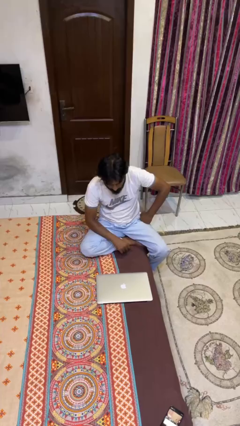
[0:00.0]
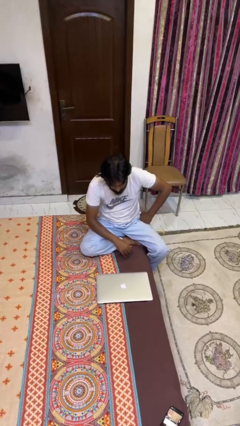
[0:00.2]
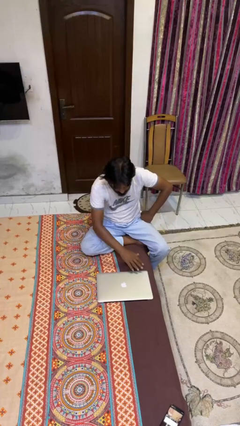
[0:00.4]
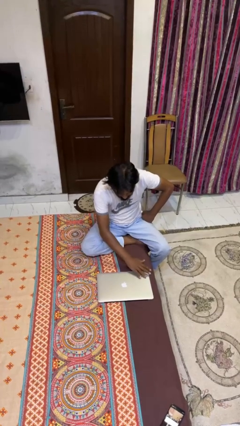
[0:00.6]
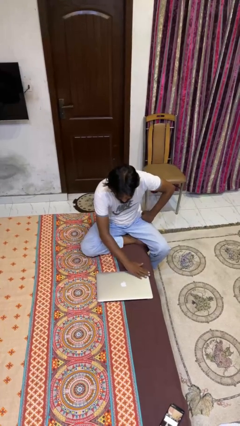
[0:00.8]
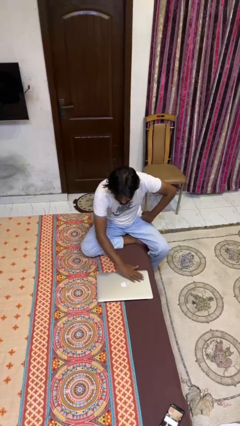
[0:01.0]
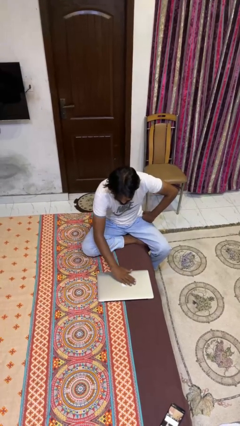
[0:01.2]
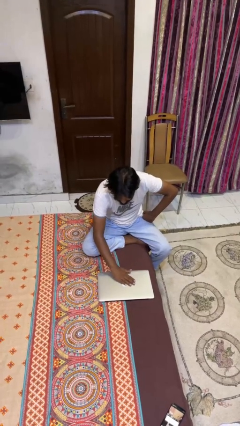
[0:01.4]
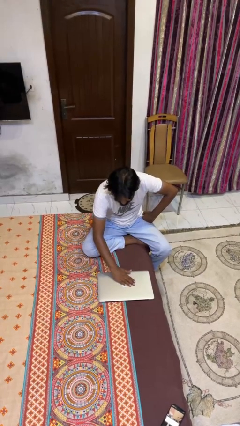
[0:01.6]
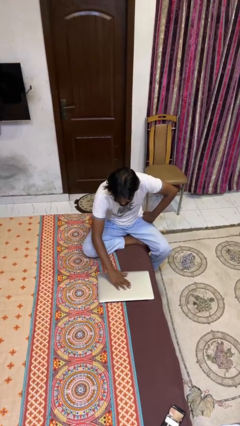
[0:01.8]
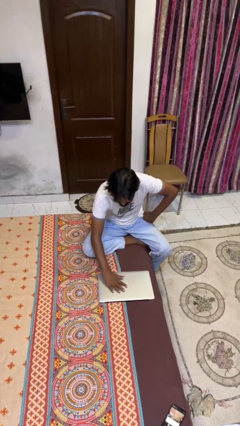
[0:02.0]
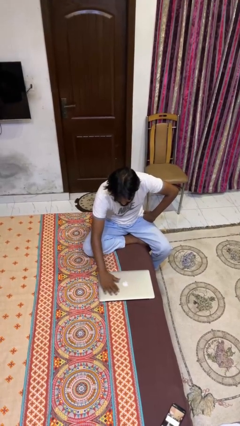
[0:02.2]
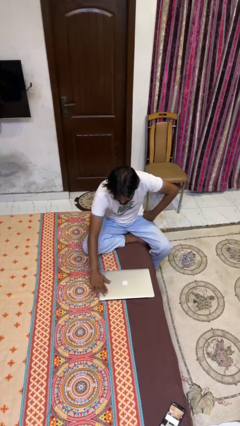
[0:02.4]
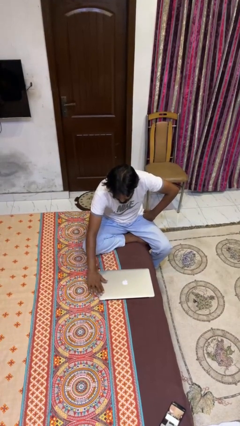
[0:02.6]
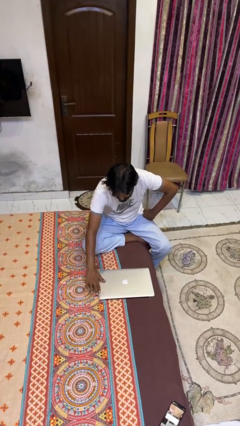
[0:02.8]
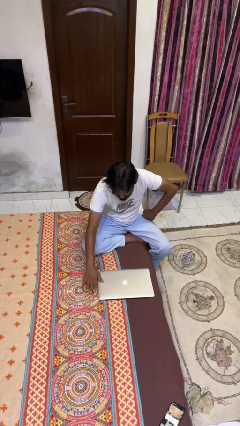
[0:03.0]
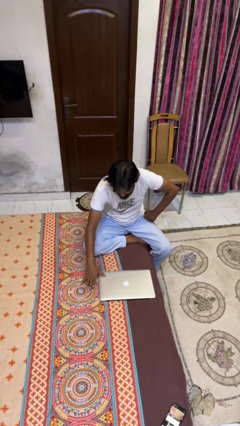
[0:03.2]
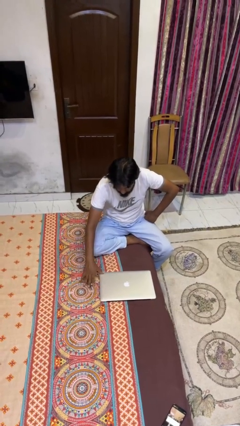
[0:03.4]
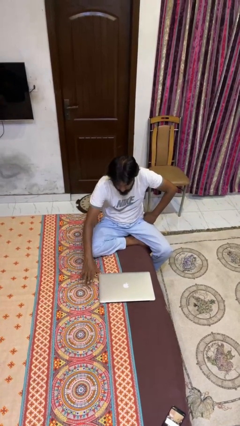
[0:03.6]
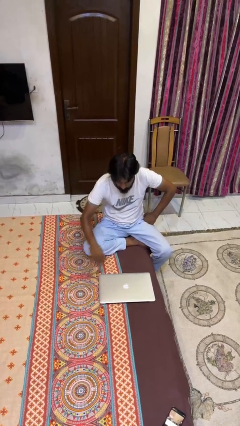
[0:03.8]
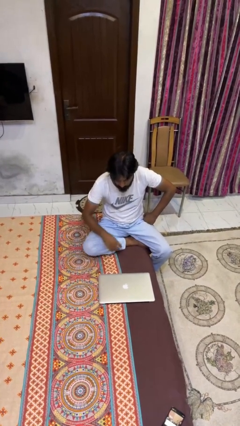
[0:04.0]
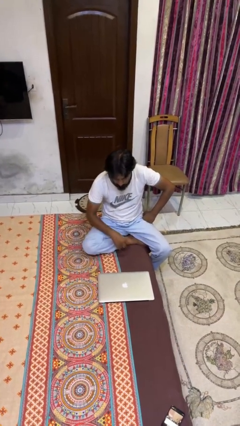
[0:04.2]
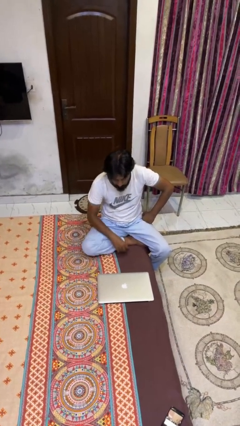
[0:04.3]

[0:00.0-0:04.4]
person waves hand over object

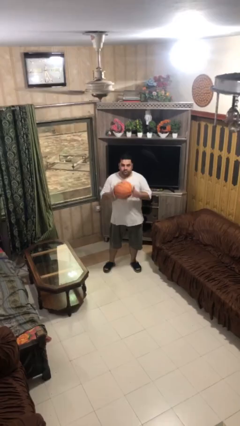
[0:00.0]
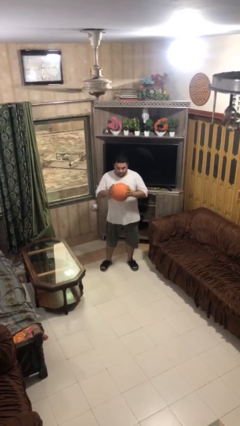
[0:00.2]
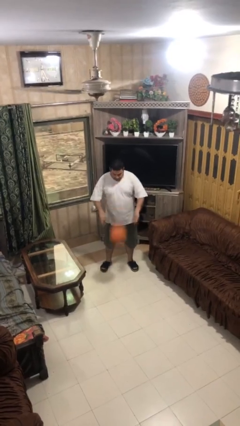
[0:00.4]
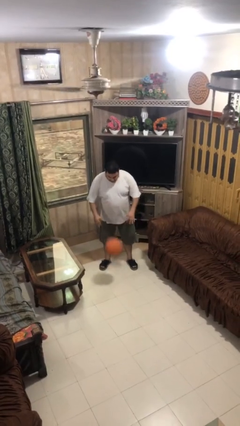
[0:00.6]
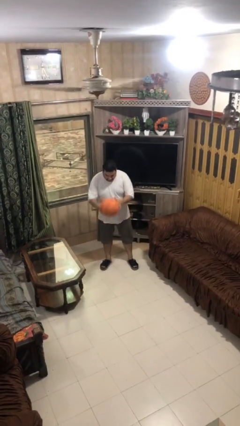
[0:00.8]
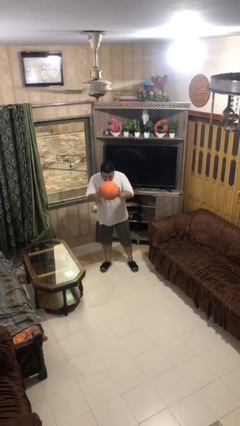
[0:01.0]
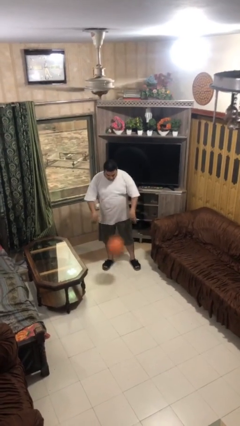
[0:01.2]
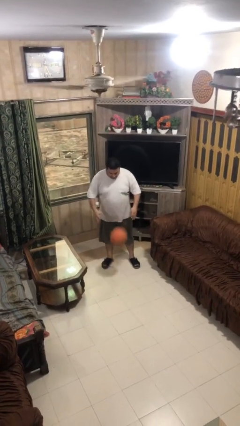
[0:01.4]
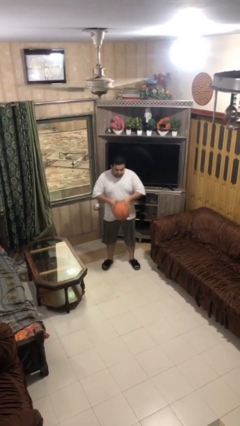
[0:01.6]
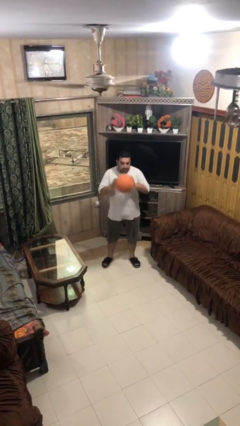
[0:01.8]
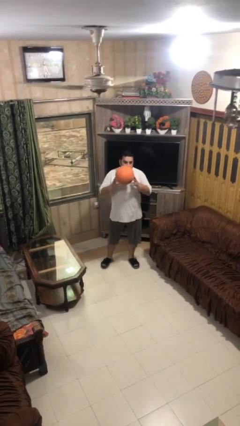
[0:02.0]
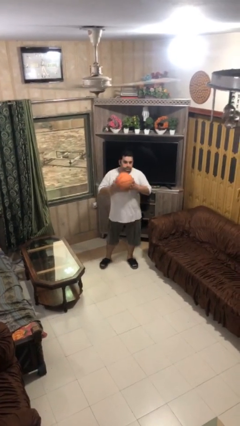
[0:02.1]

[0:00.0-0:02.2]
person bounces ball on floor

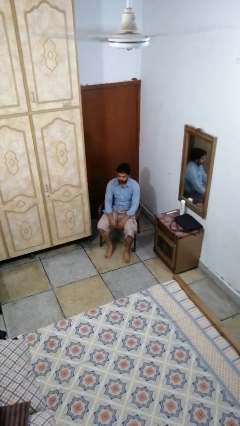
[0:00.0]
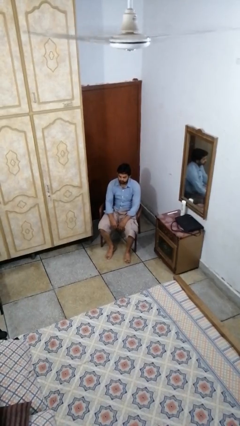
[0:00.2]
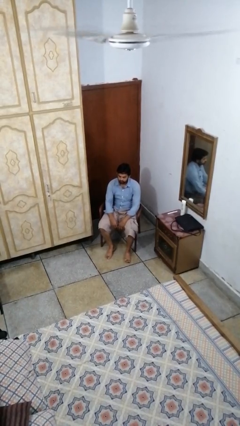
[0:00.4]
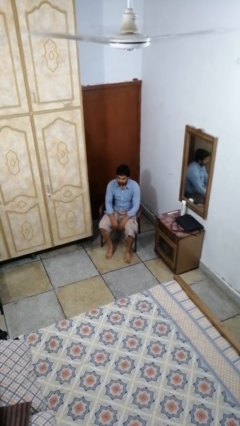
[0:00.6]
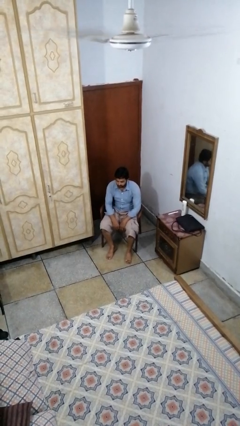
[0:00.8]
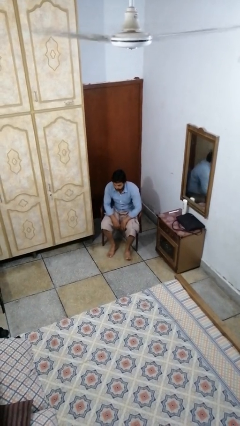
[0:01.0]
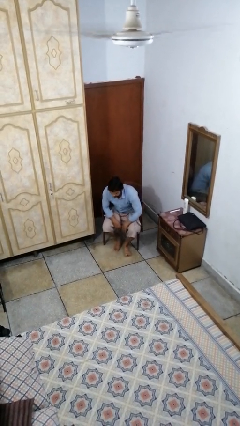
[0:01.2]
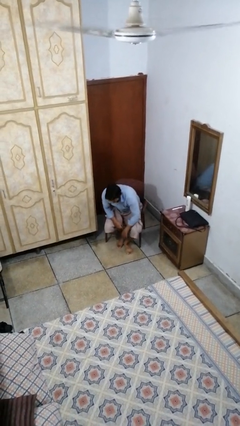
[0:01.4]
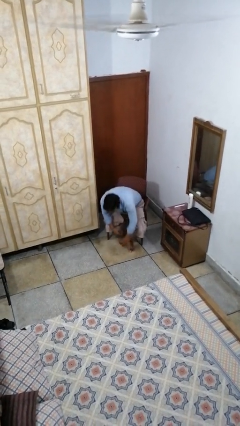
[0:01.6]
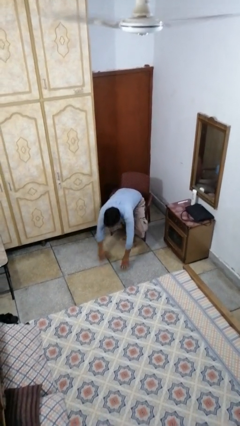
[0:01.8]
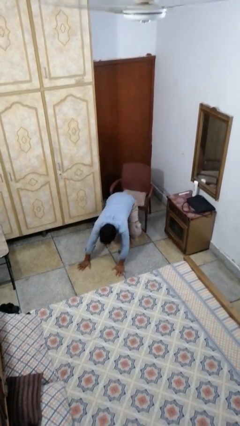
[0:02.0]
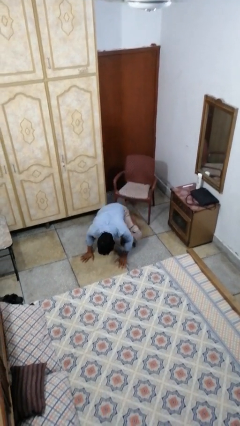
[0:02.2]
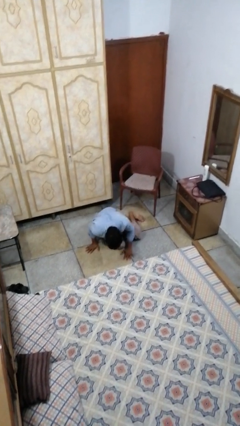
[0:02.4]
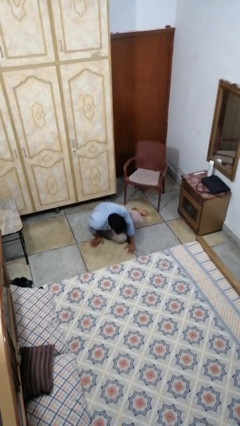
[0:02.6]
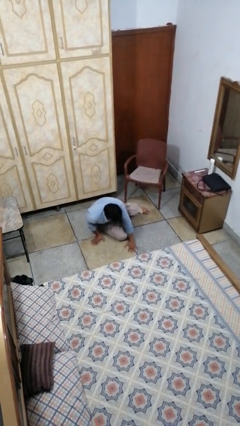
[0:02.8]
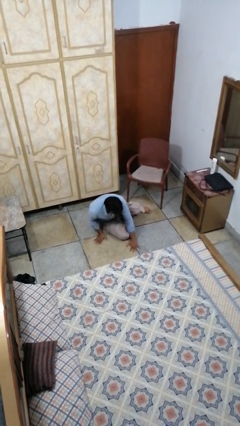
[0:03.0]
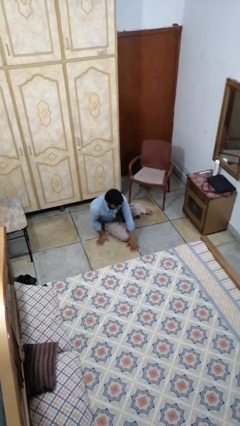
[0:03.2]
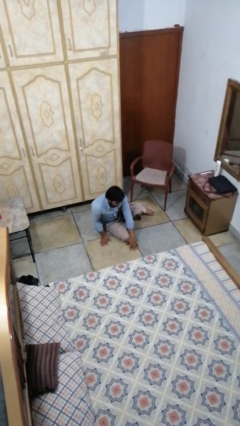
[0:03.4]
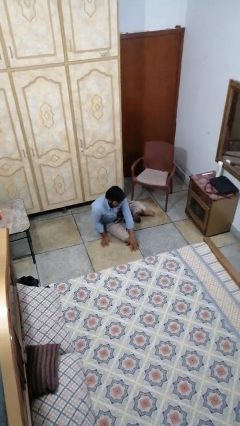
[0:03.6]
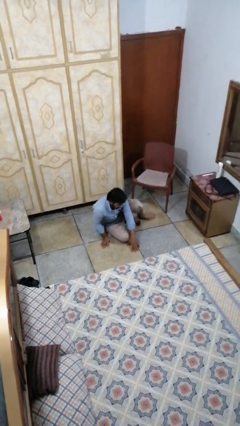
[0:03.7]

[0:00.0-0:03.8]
person falls from chair

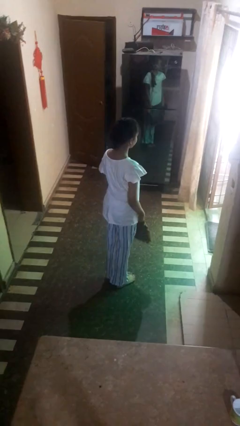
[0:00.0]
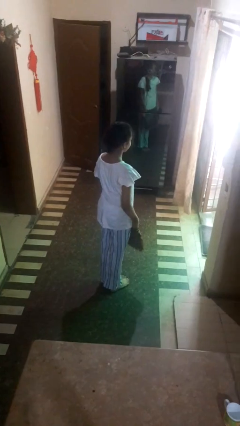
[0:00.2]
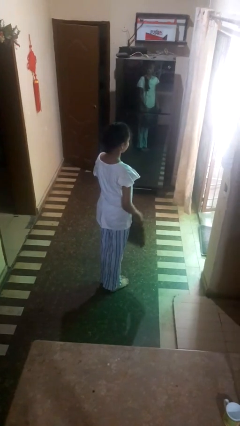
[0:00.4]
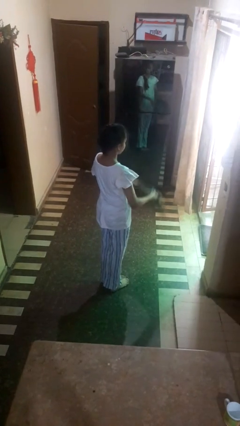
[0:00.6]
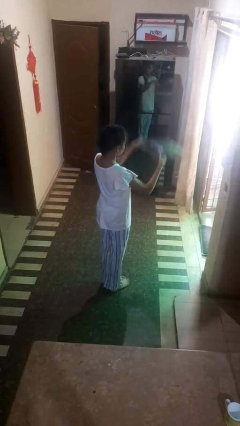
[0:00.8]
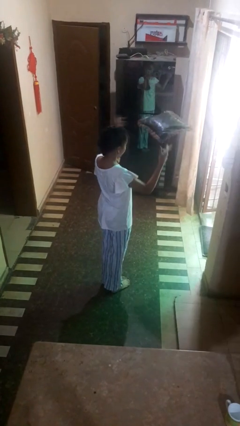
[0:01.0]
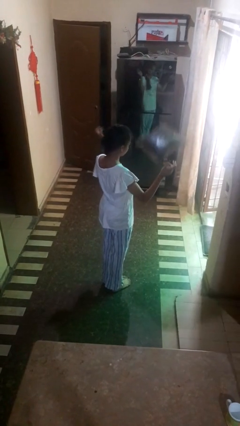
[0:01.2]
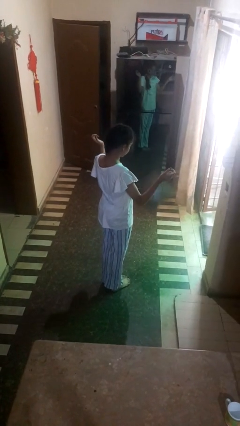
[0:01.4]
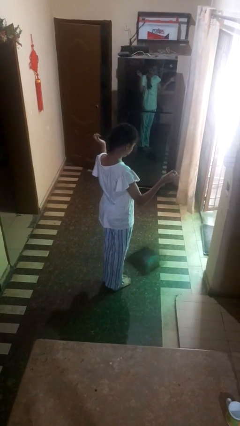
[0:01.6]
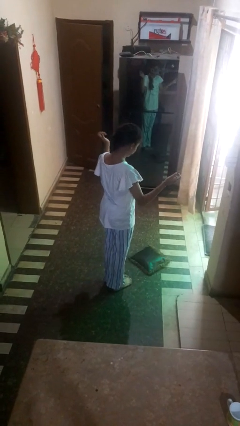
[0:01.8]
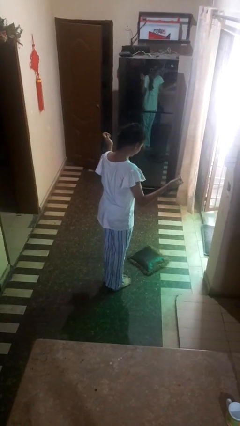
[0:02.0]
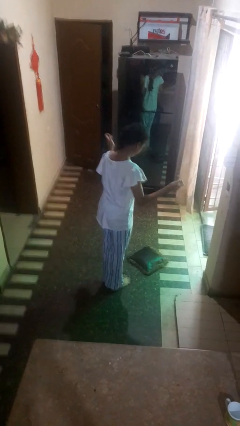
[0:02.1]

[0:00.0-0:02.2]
person throws object into air

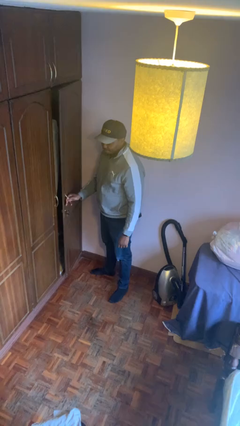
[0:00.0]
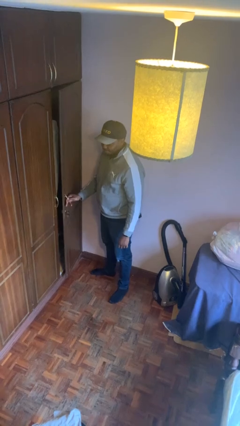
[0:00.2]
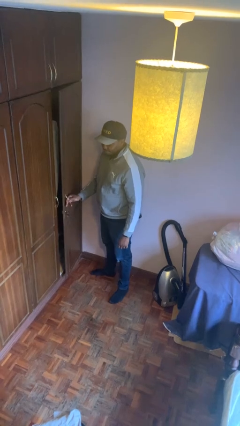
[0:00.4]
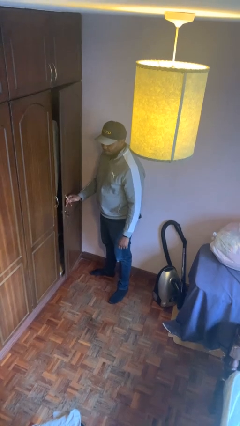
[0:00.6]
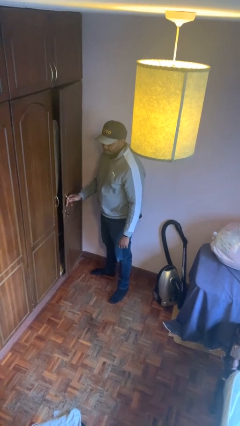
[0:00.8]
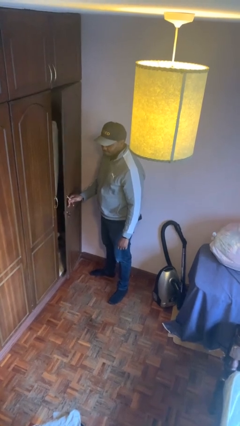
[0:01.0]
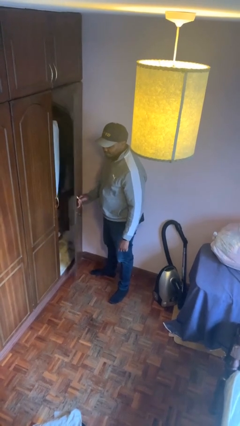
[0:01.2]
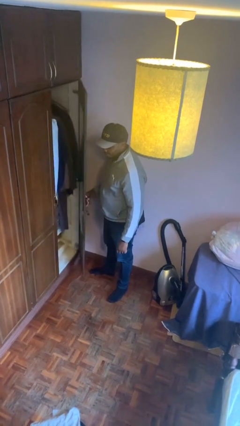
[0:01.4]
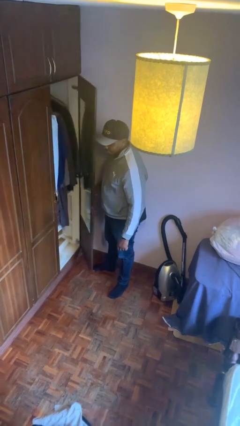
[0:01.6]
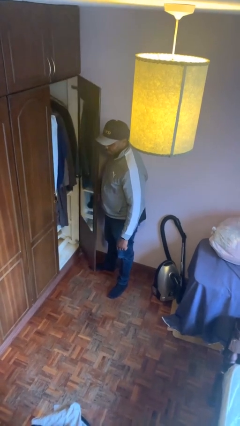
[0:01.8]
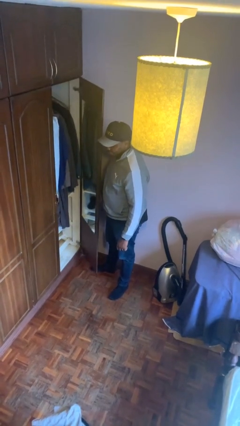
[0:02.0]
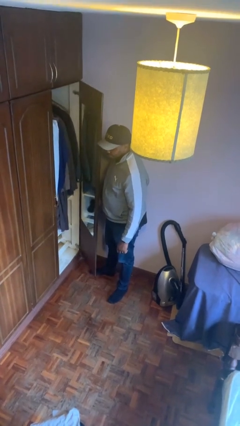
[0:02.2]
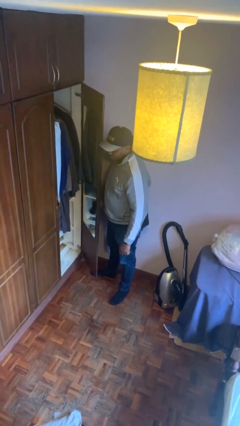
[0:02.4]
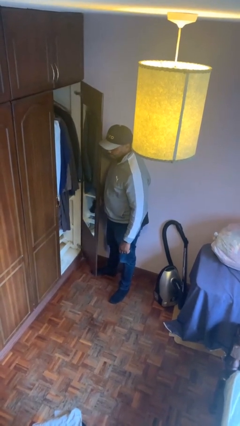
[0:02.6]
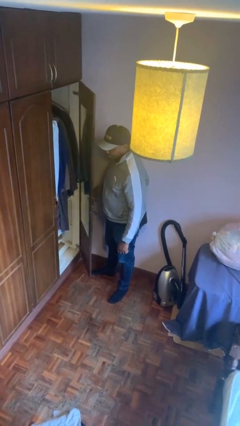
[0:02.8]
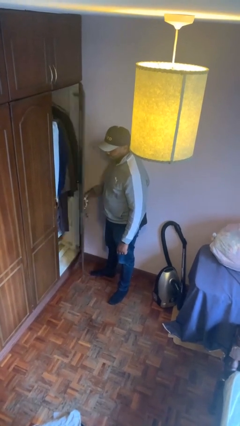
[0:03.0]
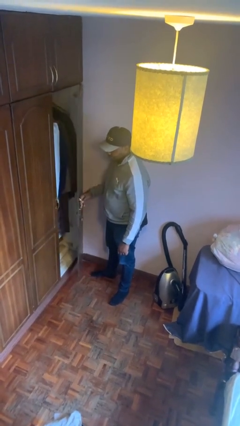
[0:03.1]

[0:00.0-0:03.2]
person opens closet door

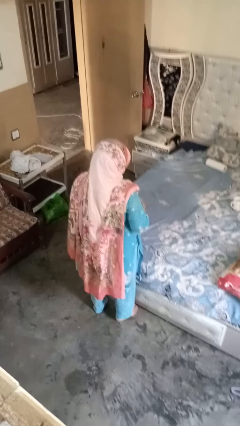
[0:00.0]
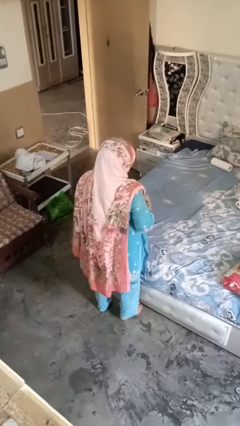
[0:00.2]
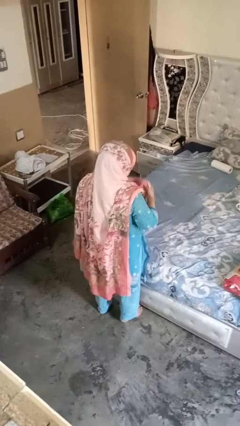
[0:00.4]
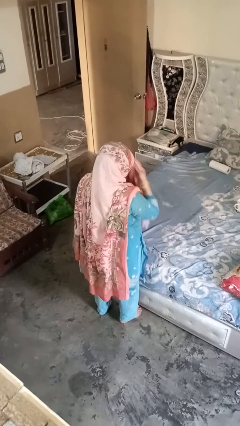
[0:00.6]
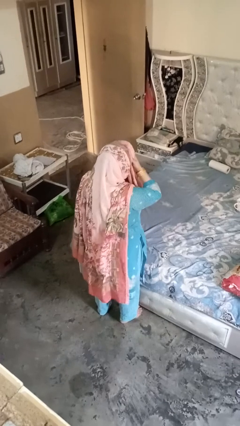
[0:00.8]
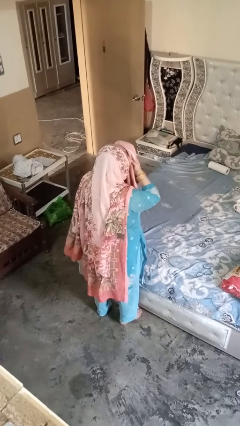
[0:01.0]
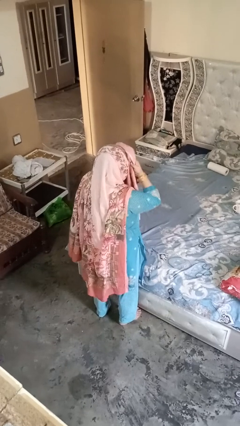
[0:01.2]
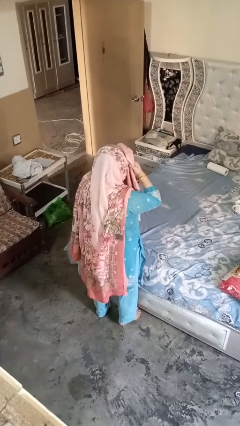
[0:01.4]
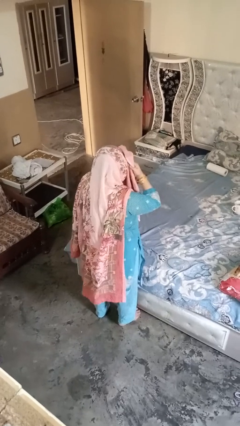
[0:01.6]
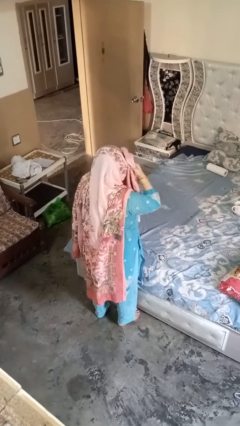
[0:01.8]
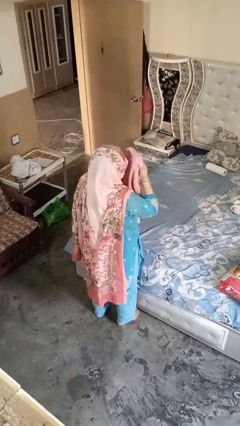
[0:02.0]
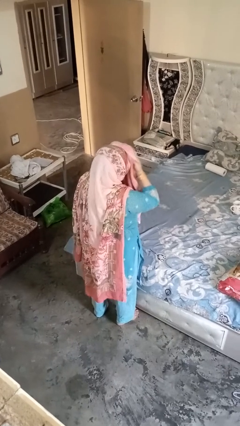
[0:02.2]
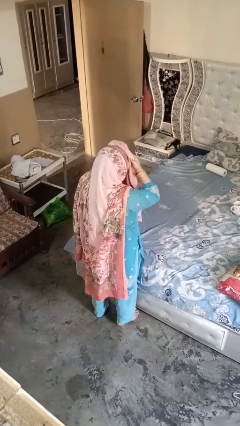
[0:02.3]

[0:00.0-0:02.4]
person dries hair with towel
